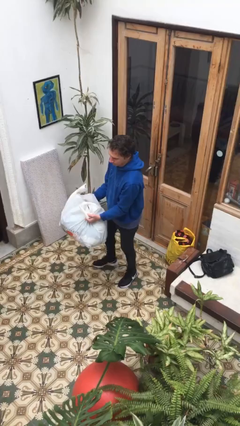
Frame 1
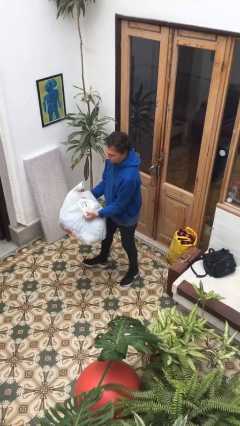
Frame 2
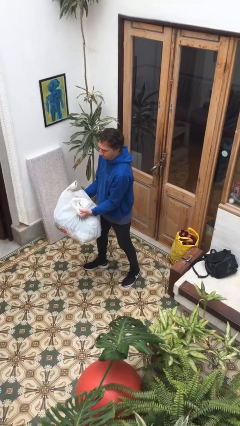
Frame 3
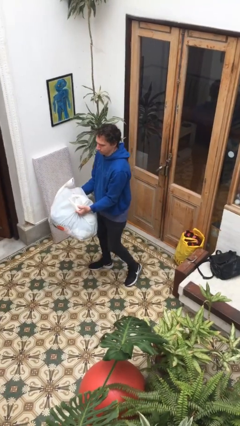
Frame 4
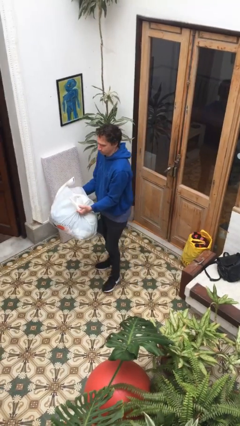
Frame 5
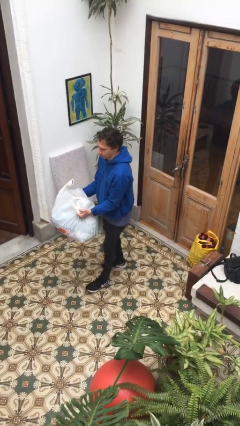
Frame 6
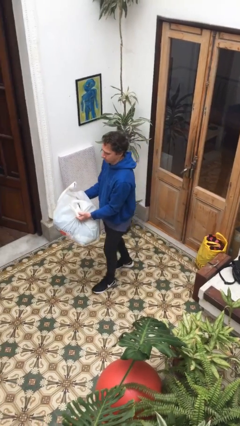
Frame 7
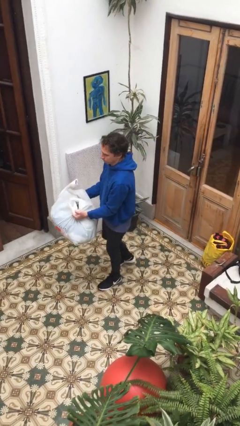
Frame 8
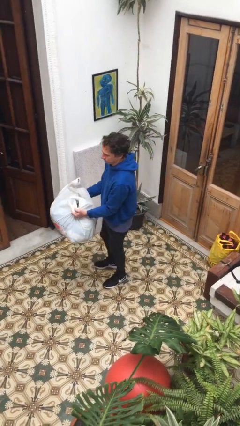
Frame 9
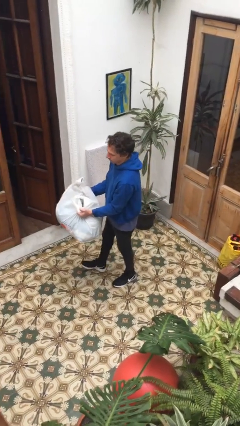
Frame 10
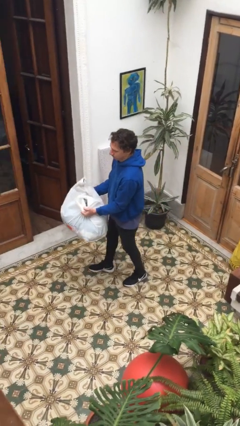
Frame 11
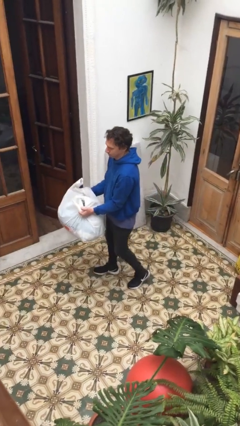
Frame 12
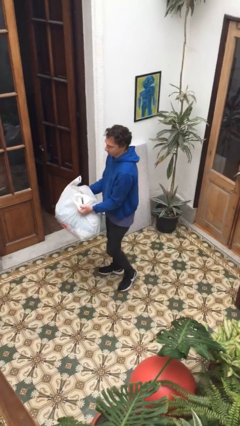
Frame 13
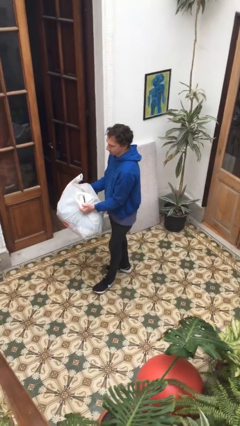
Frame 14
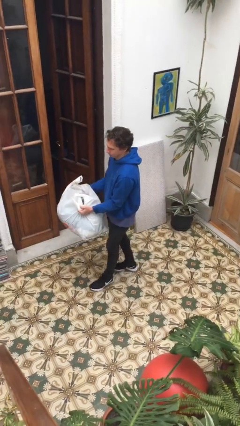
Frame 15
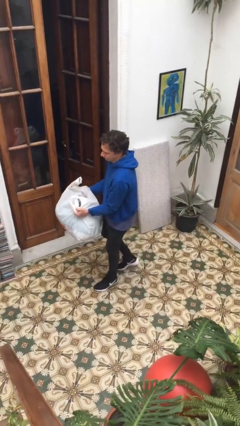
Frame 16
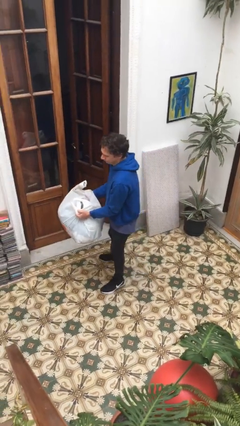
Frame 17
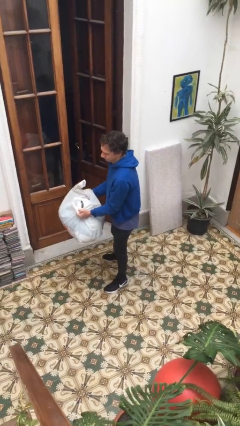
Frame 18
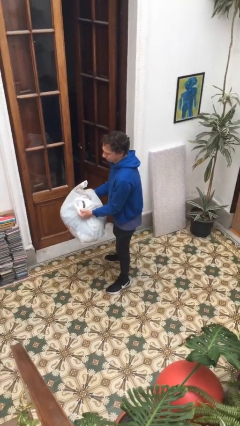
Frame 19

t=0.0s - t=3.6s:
person carries heavy object

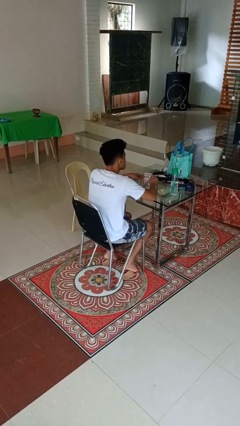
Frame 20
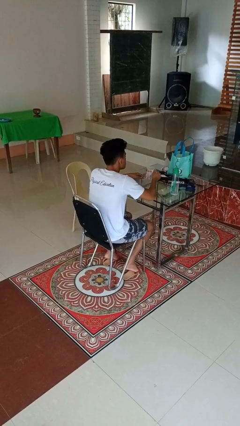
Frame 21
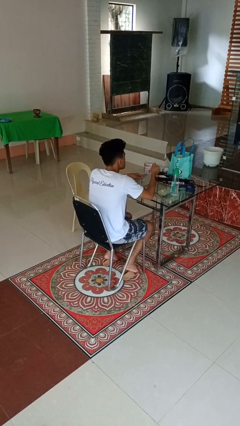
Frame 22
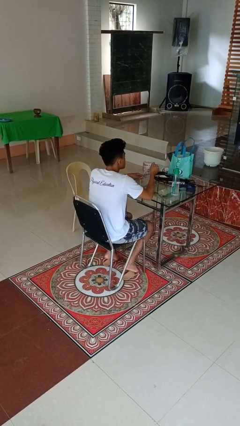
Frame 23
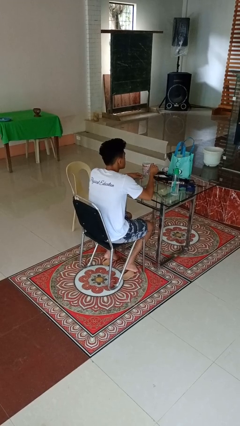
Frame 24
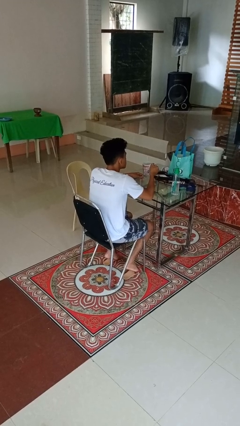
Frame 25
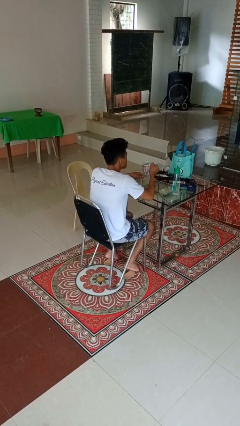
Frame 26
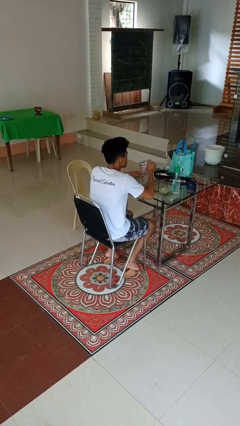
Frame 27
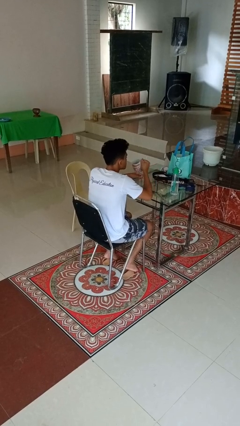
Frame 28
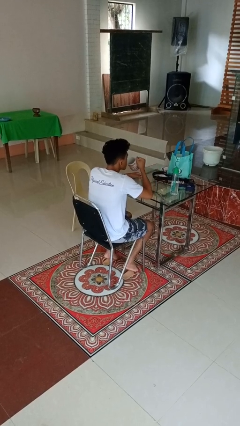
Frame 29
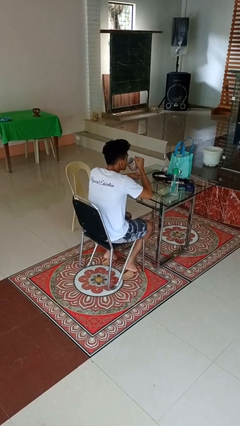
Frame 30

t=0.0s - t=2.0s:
person picks up object from table

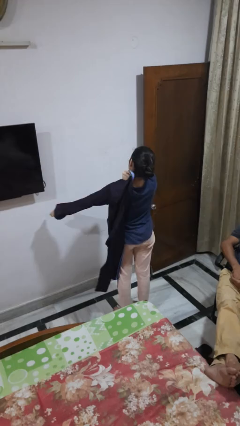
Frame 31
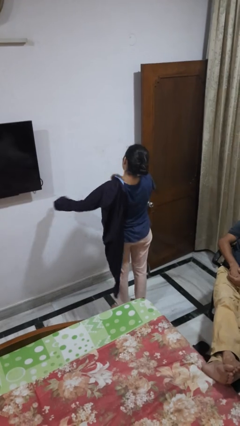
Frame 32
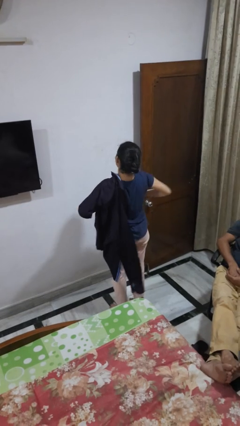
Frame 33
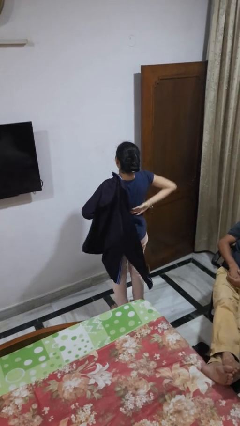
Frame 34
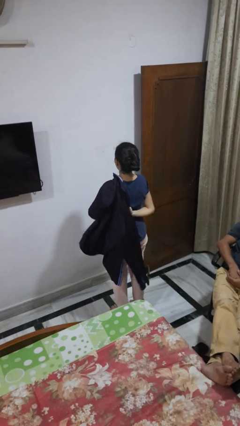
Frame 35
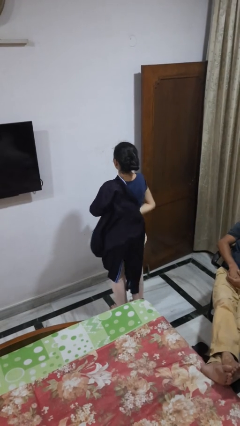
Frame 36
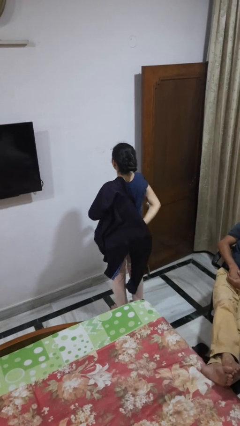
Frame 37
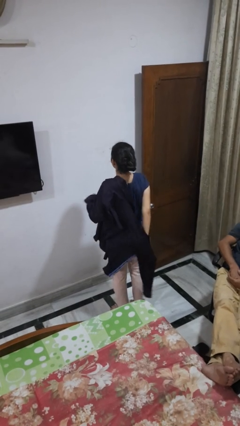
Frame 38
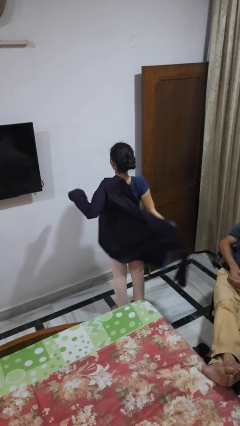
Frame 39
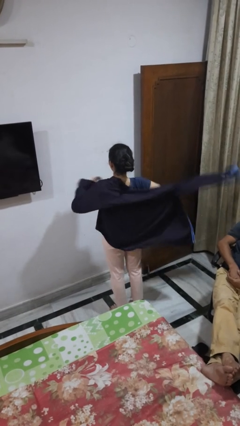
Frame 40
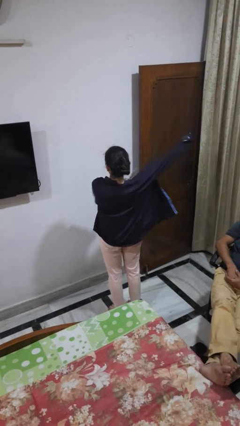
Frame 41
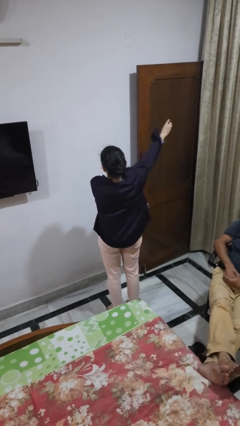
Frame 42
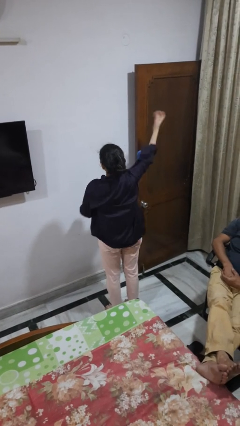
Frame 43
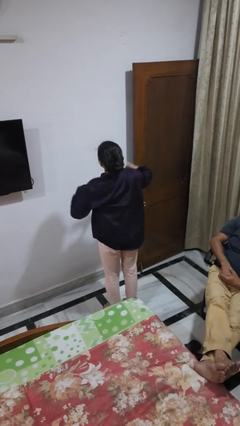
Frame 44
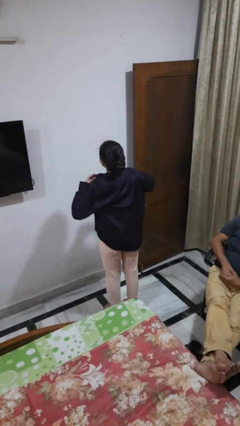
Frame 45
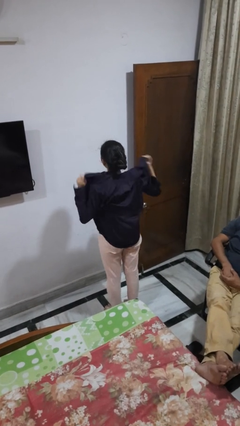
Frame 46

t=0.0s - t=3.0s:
person puts on shirt

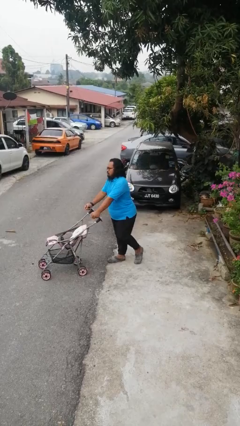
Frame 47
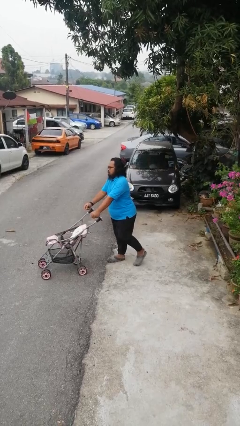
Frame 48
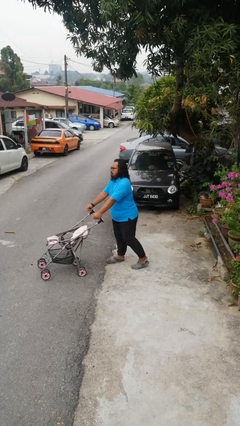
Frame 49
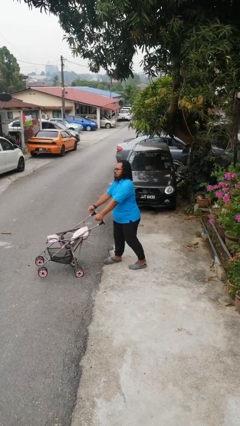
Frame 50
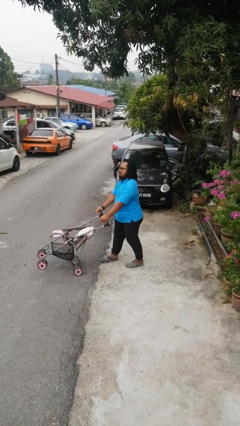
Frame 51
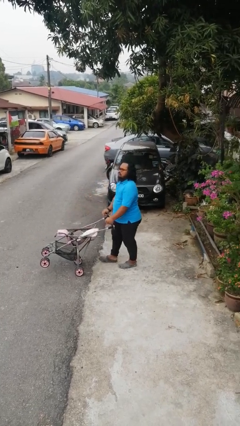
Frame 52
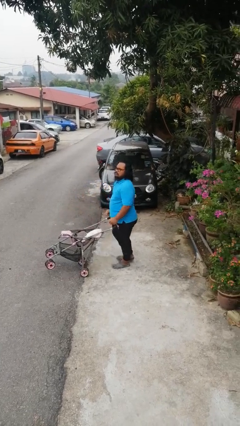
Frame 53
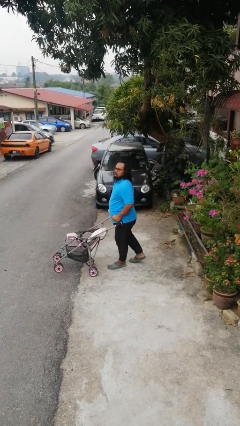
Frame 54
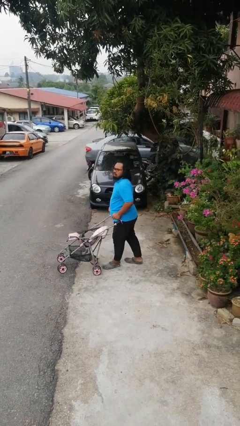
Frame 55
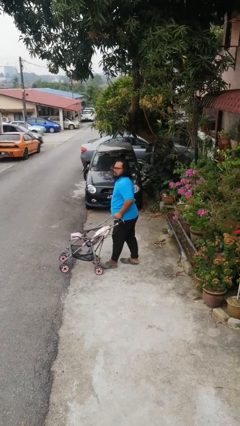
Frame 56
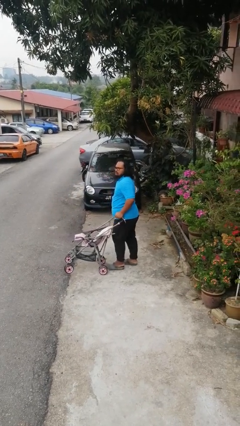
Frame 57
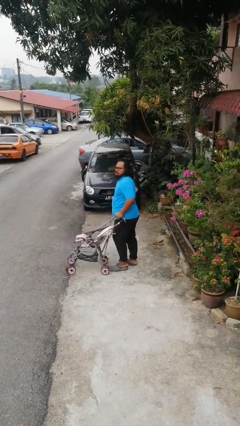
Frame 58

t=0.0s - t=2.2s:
person pulls wheeled cart

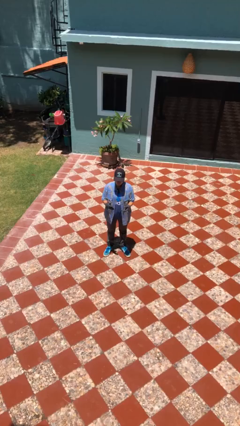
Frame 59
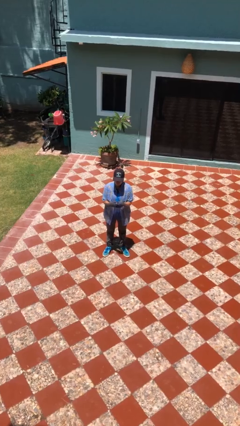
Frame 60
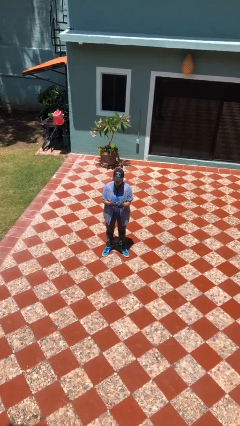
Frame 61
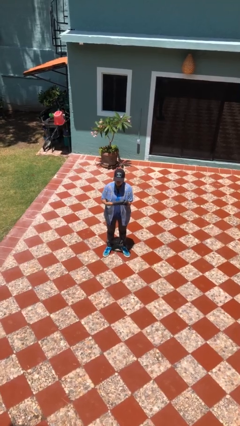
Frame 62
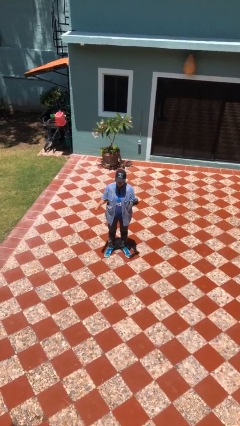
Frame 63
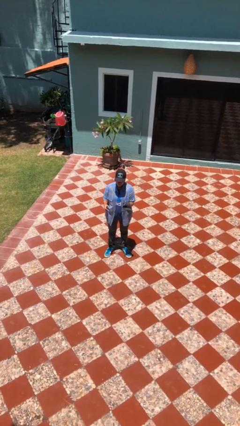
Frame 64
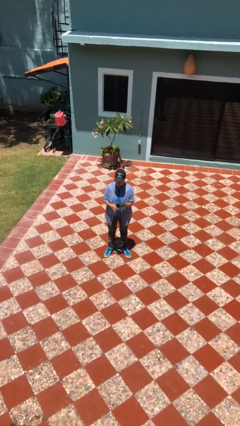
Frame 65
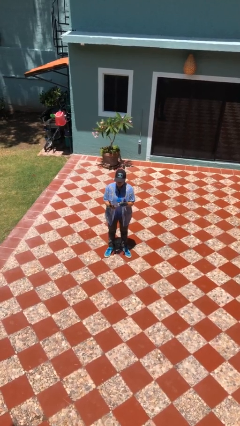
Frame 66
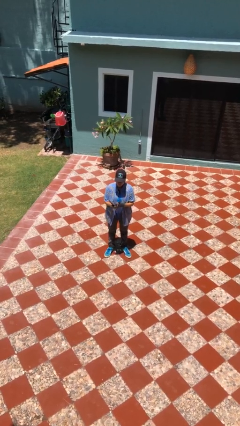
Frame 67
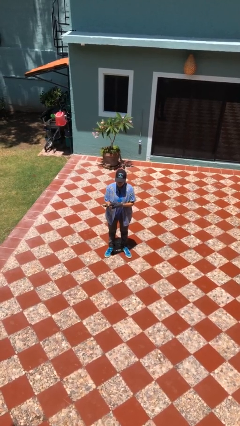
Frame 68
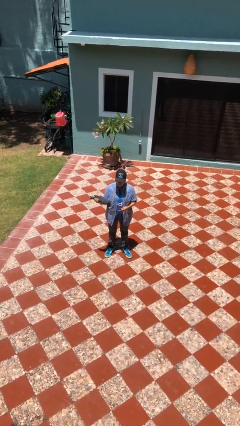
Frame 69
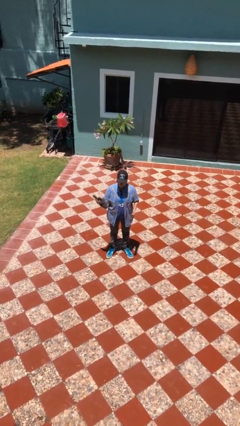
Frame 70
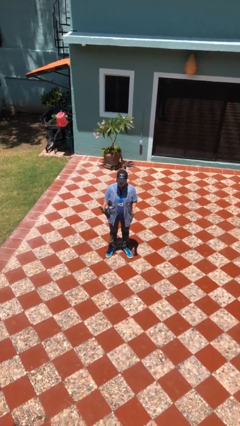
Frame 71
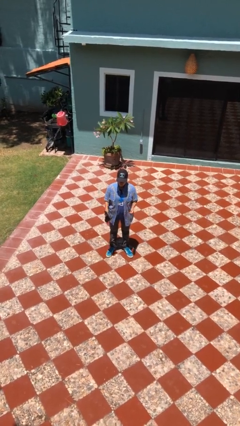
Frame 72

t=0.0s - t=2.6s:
person takes off gloves

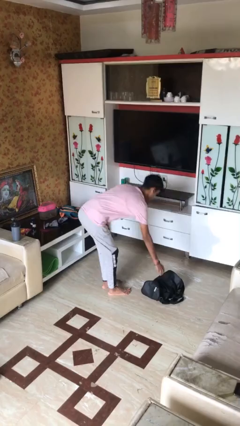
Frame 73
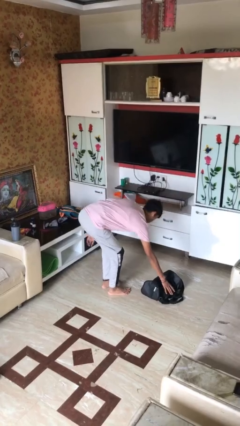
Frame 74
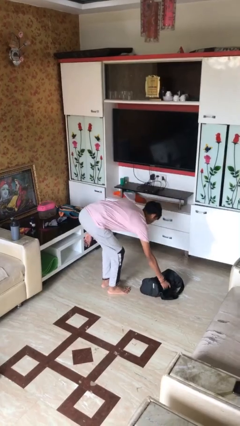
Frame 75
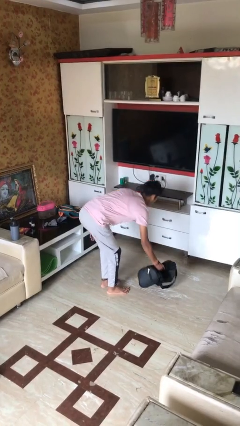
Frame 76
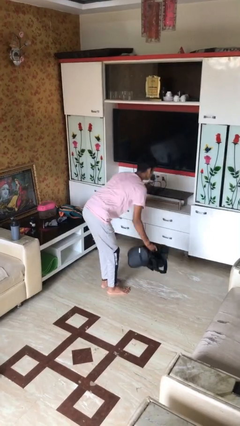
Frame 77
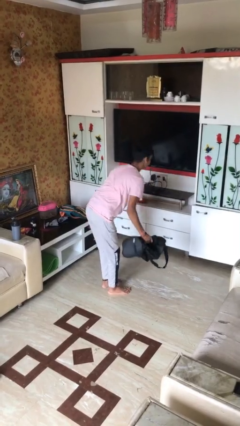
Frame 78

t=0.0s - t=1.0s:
person picks up object from floor

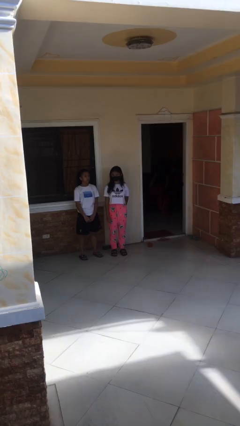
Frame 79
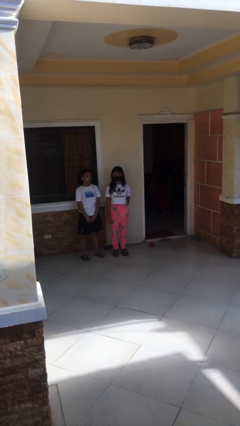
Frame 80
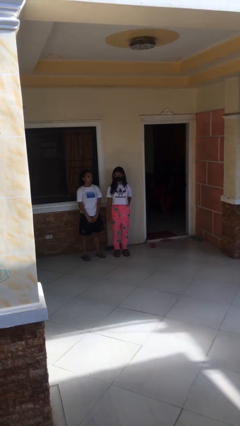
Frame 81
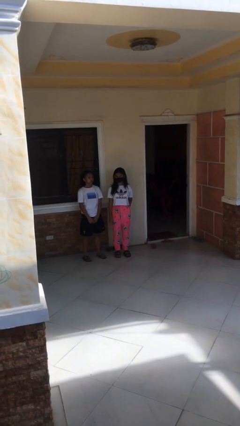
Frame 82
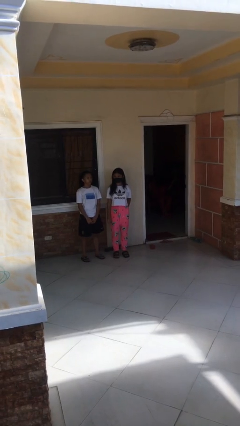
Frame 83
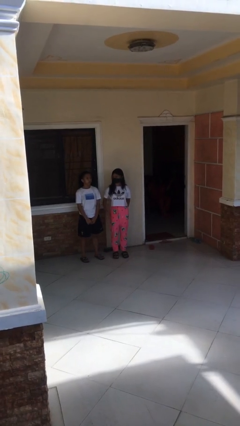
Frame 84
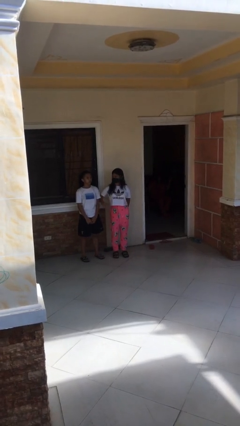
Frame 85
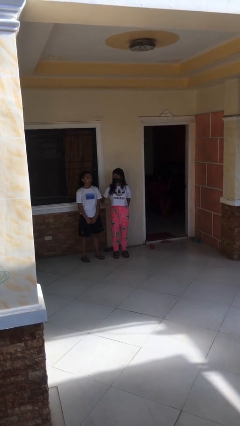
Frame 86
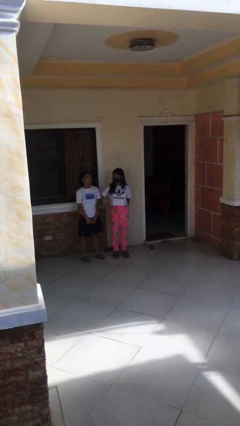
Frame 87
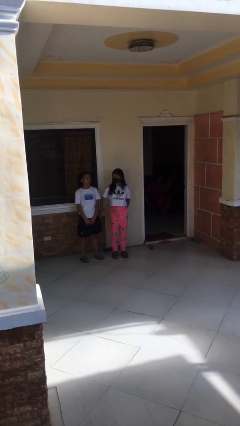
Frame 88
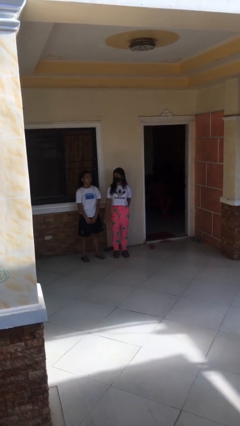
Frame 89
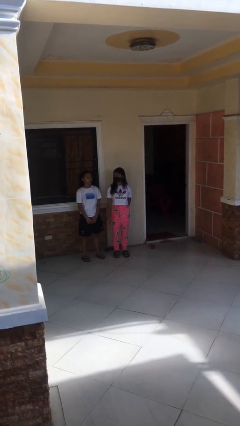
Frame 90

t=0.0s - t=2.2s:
person nudges person with elbow

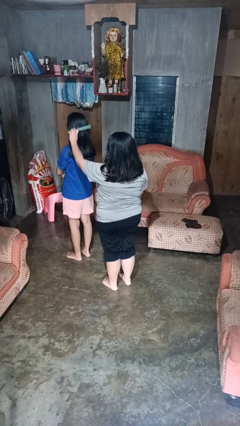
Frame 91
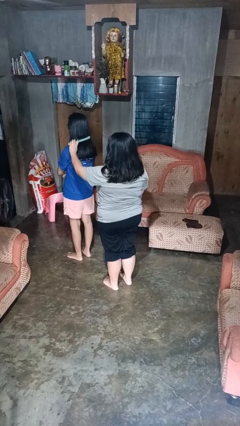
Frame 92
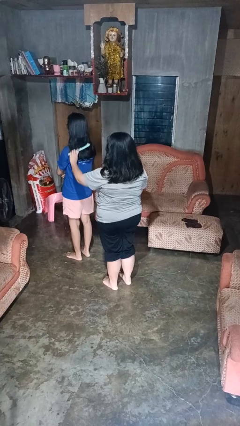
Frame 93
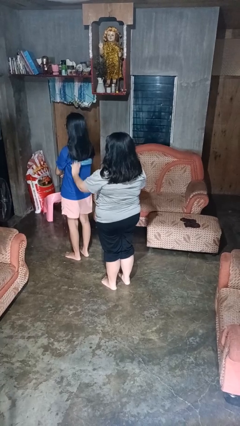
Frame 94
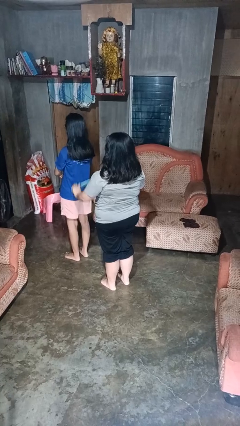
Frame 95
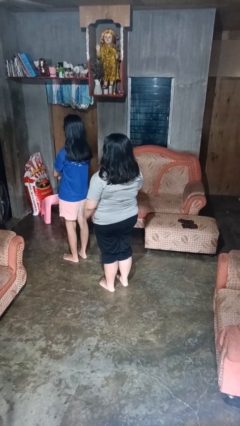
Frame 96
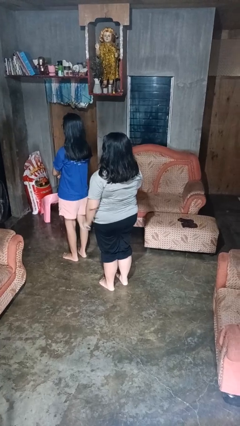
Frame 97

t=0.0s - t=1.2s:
person brushes hair of person
